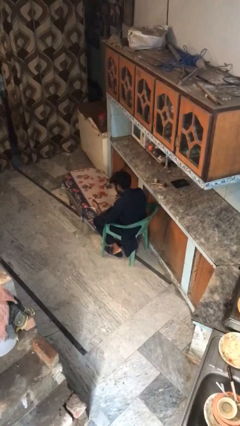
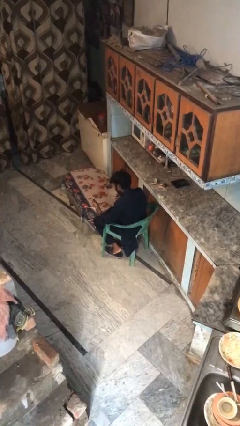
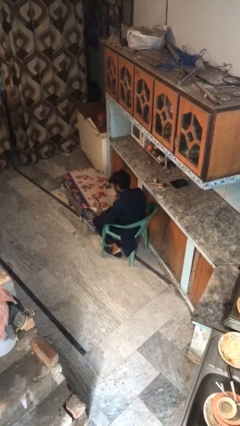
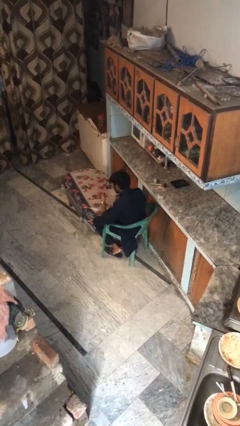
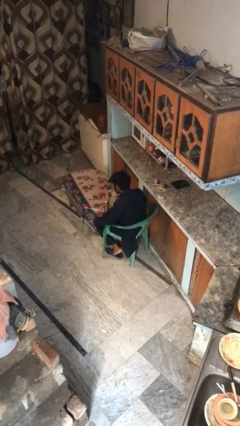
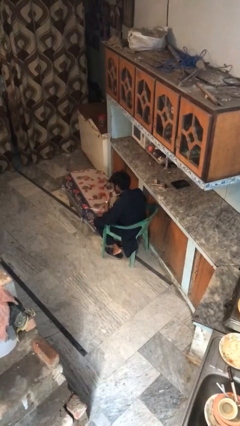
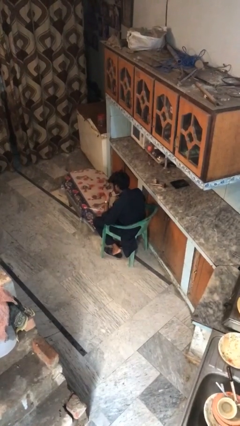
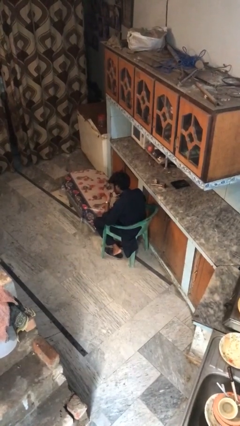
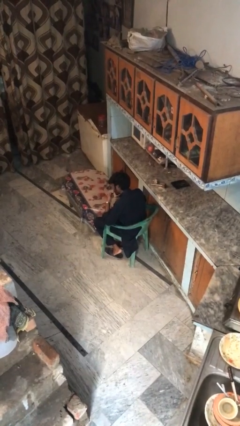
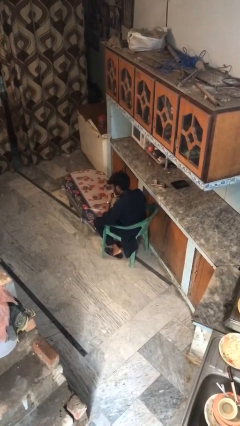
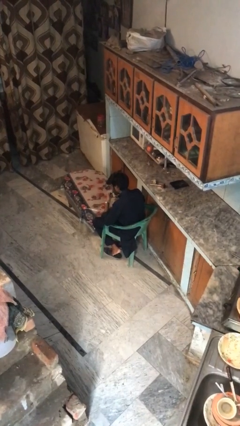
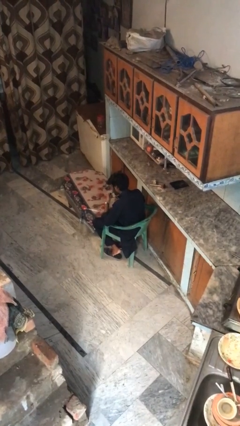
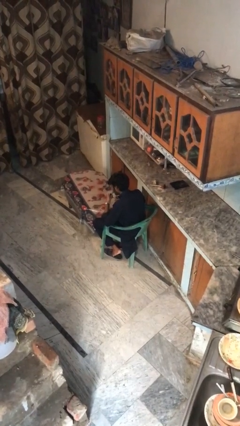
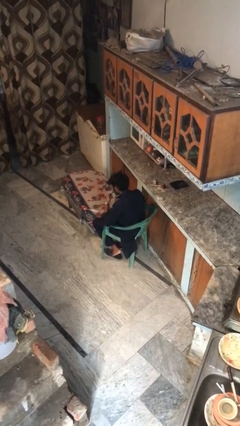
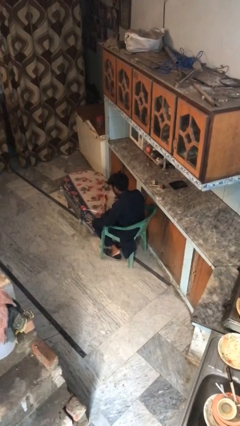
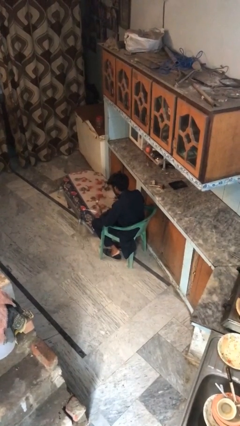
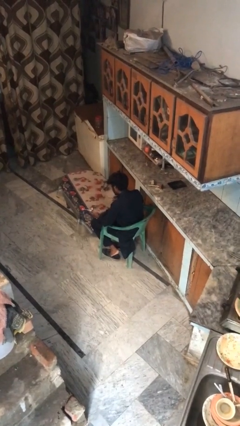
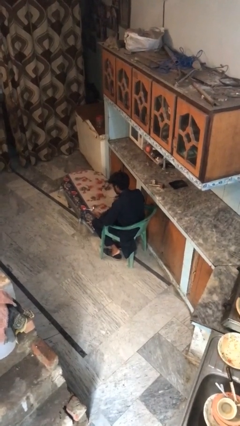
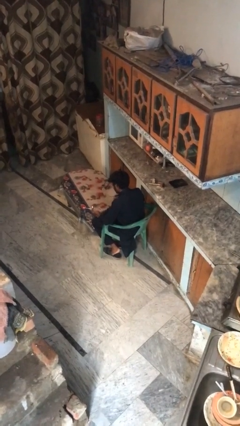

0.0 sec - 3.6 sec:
person applies lip makeup

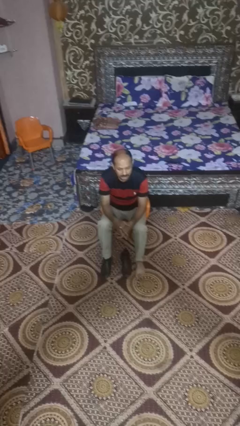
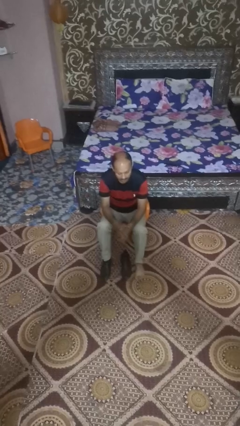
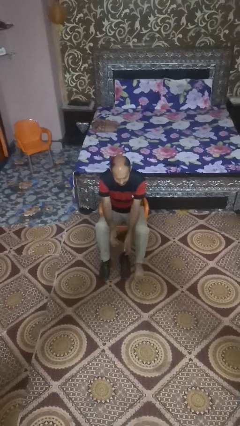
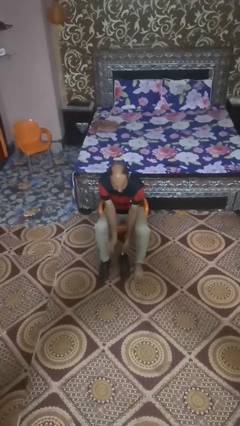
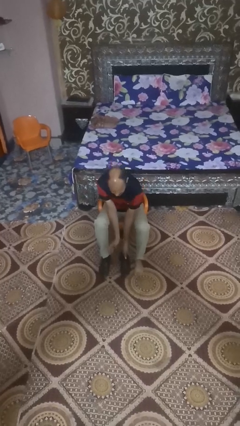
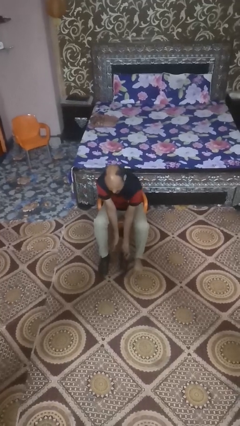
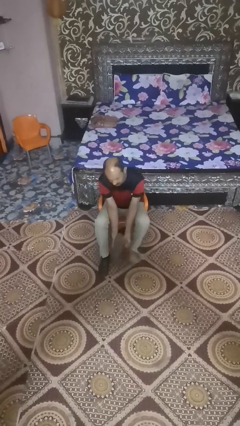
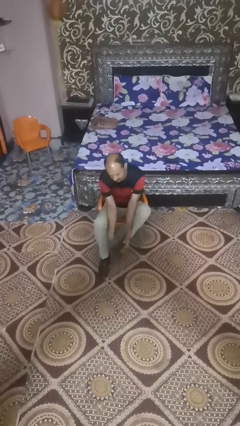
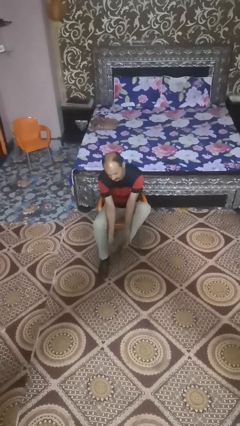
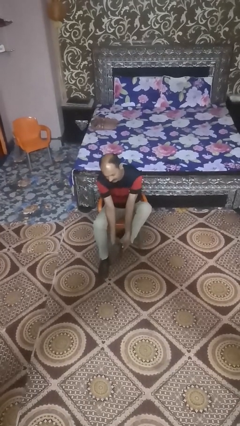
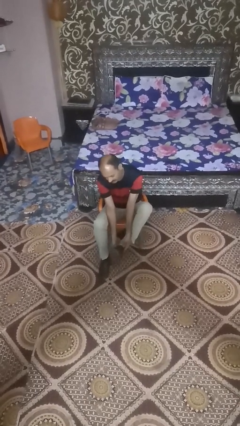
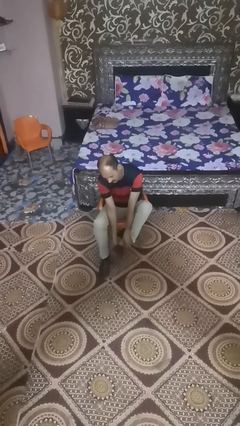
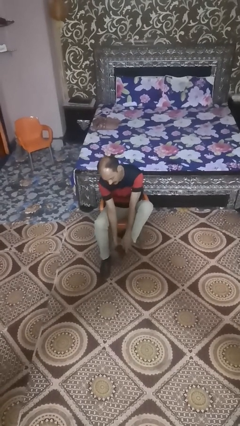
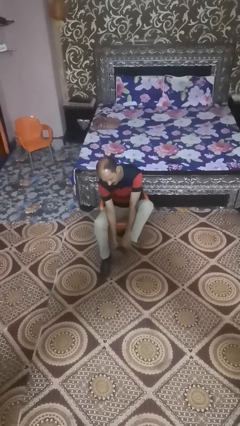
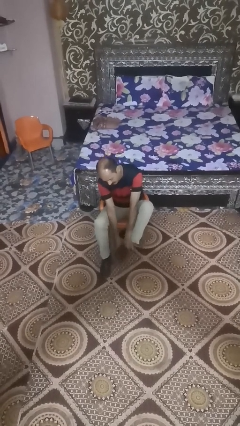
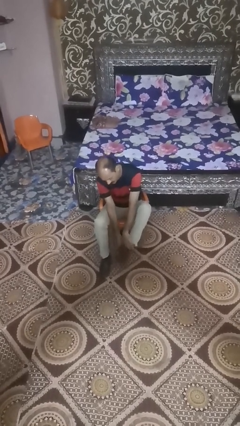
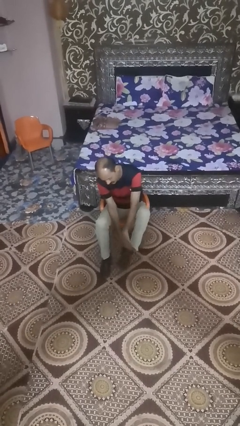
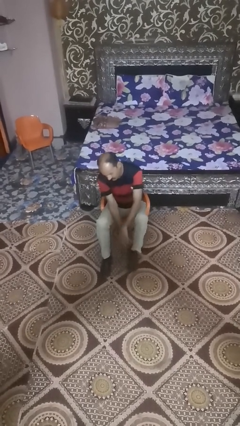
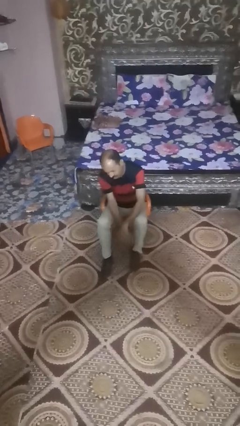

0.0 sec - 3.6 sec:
person puts on boots

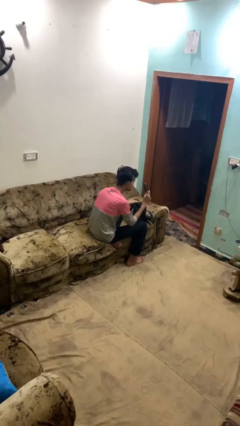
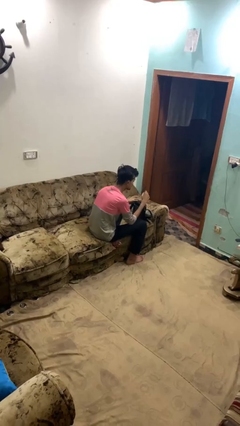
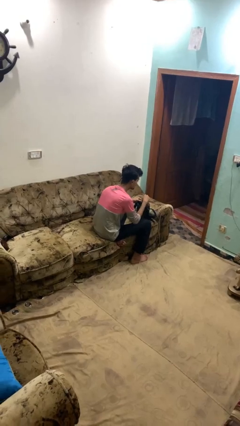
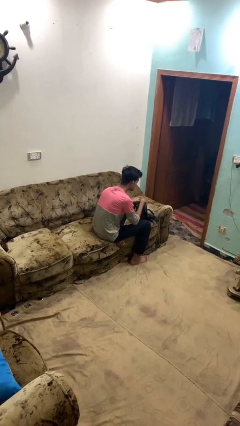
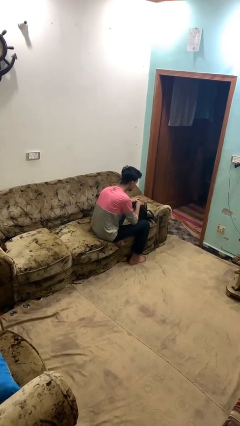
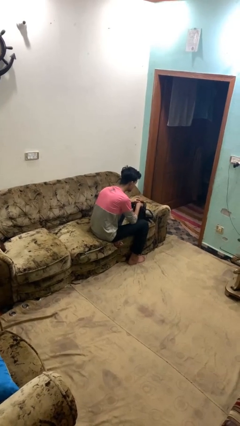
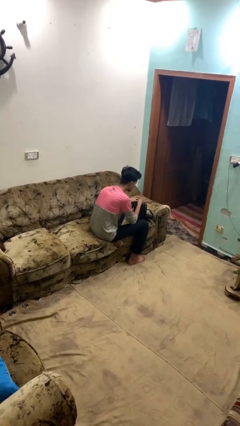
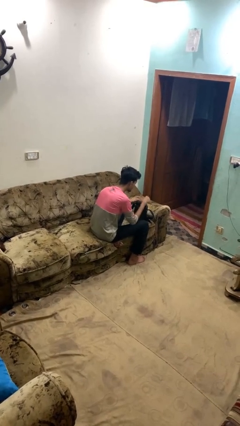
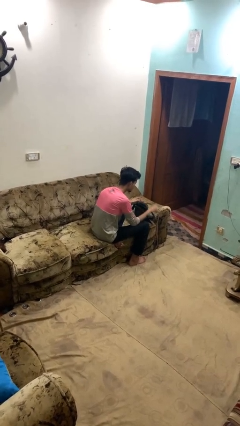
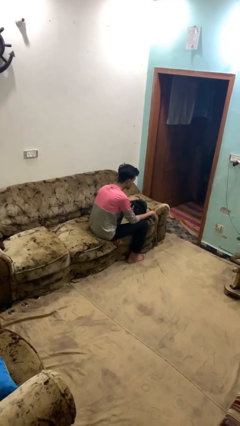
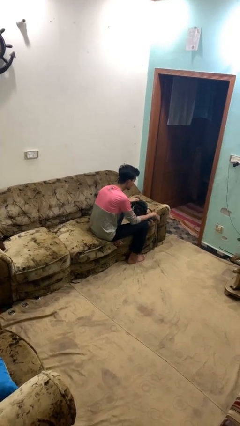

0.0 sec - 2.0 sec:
person puts object into backpack

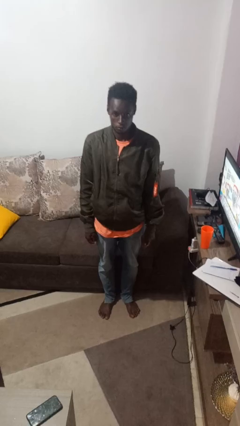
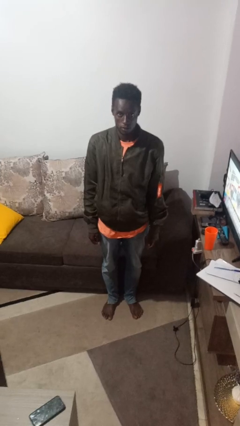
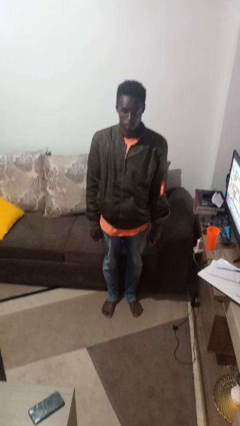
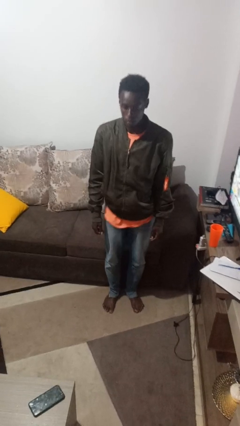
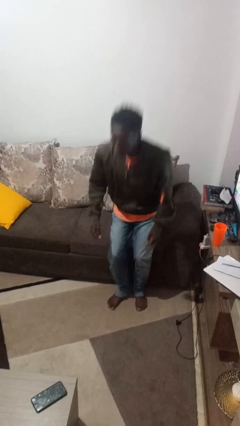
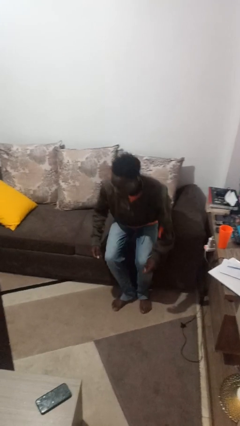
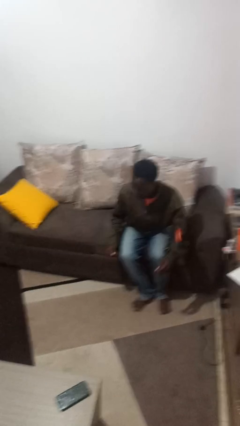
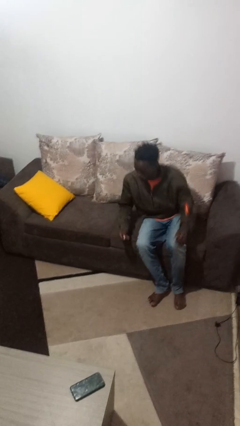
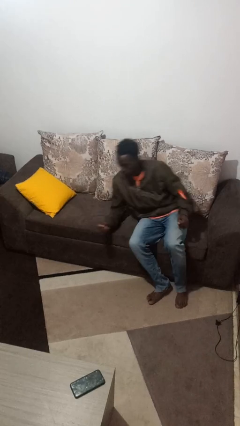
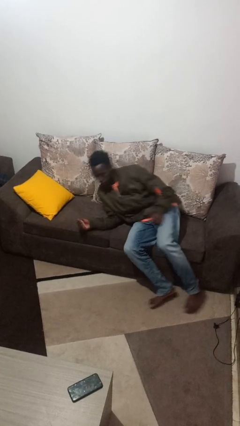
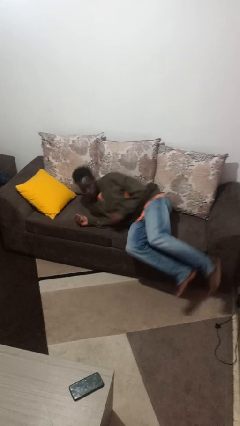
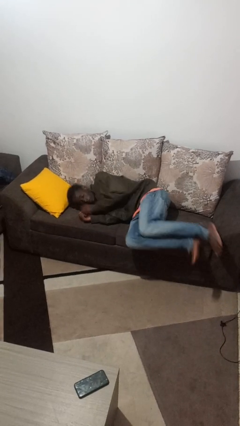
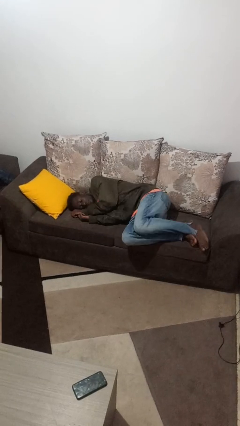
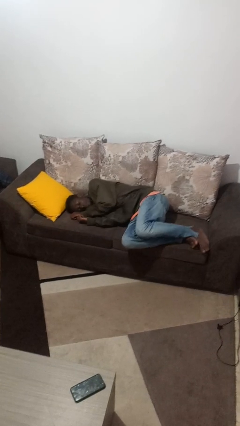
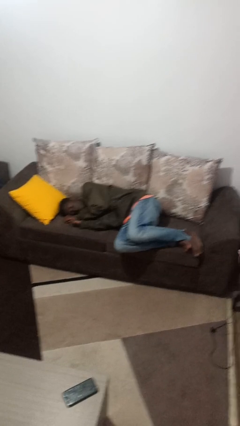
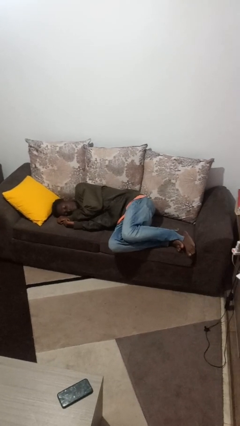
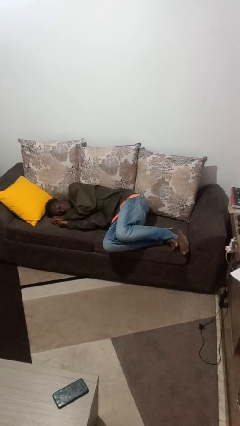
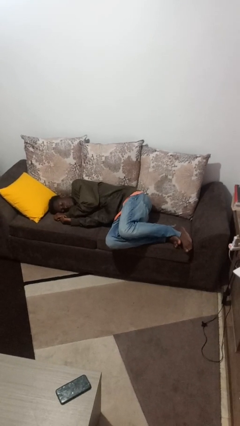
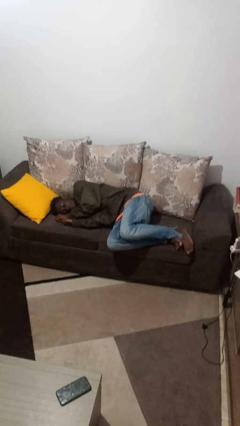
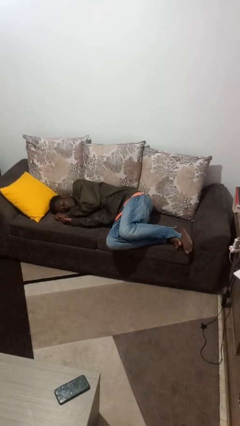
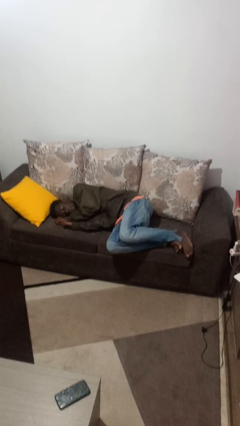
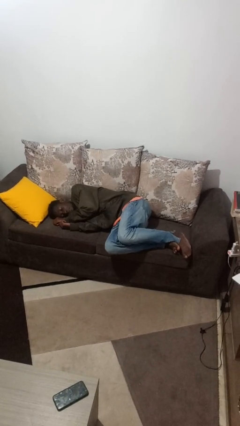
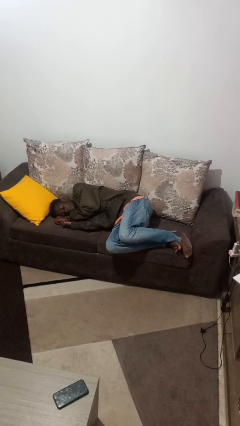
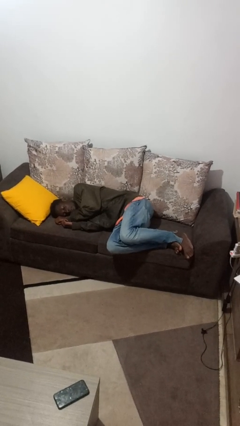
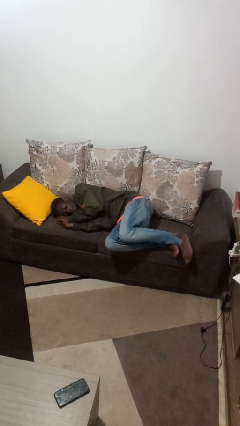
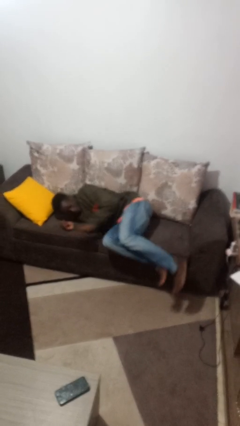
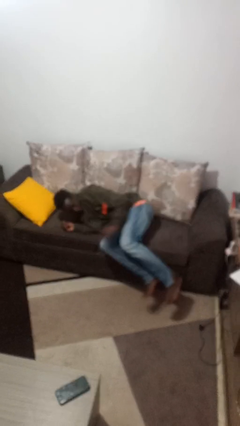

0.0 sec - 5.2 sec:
person lies down on couch

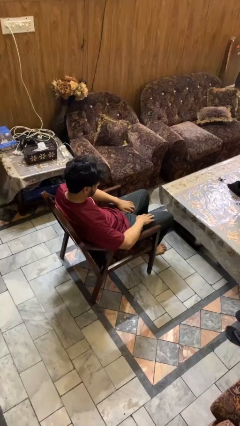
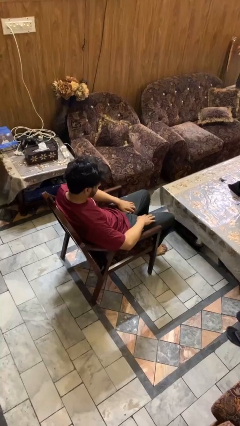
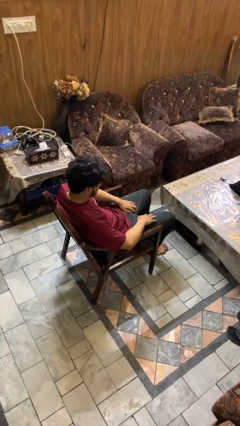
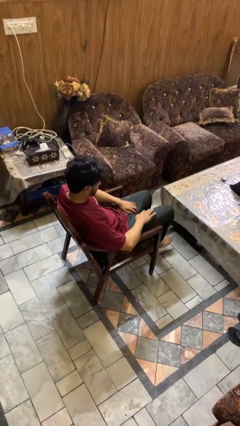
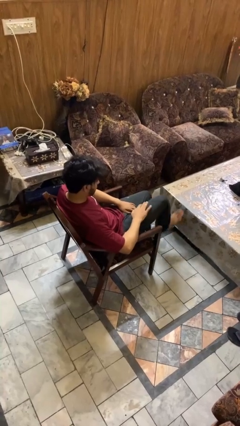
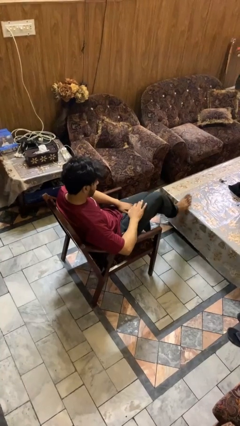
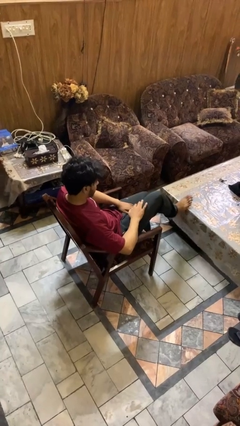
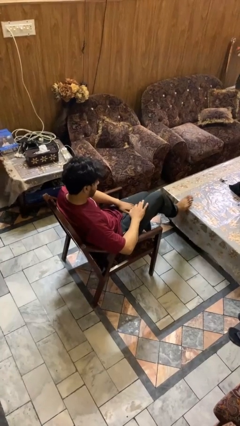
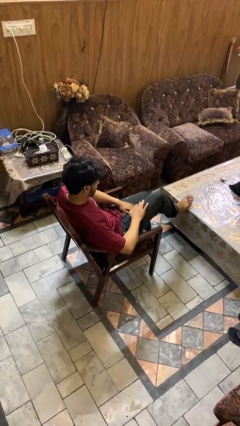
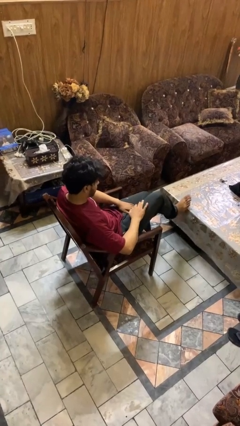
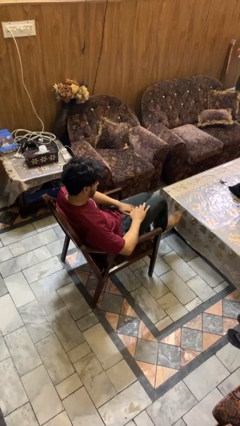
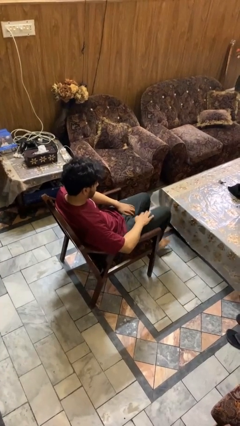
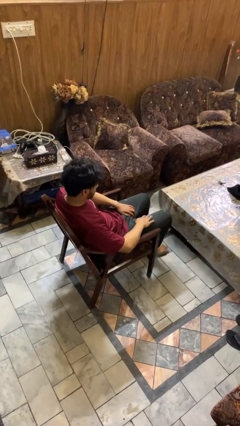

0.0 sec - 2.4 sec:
person puts feet up

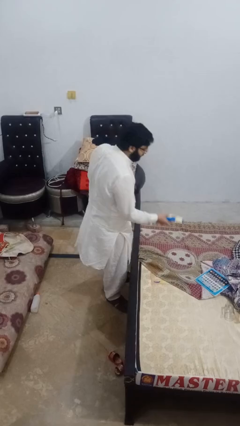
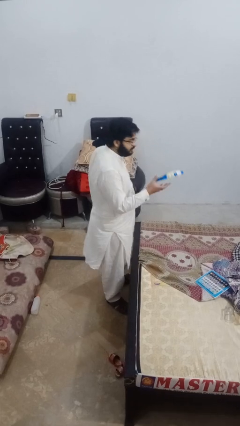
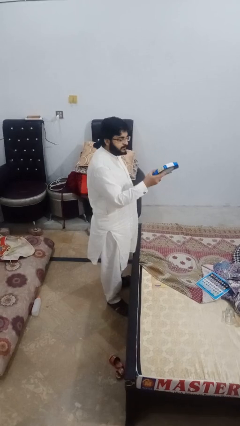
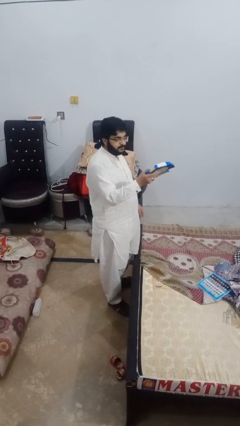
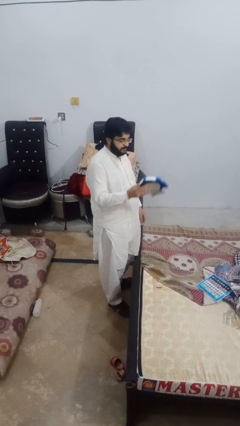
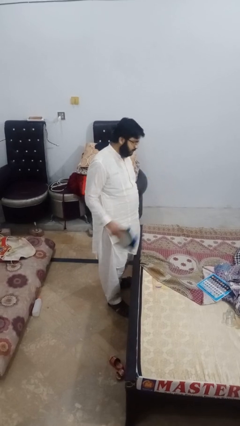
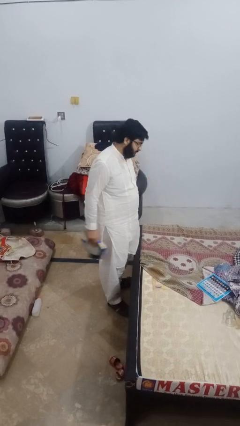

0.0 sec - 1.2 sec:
person picks up object from bed
